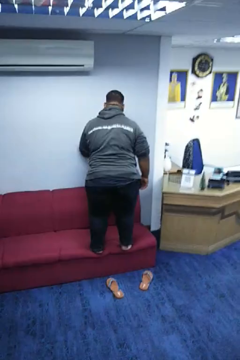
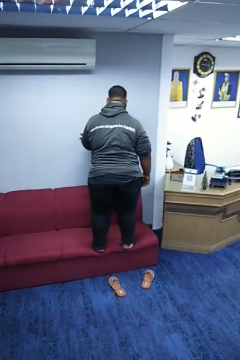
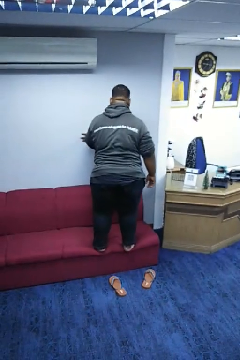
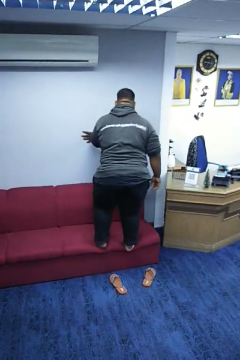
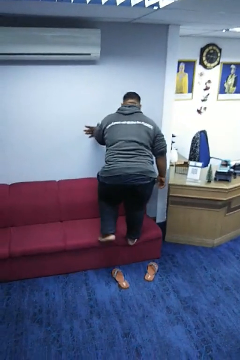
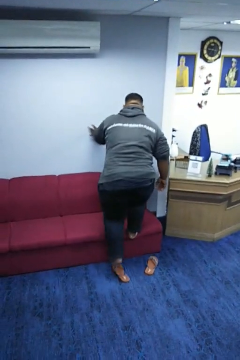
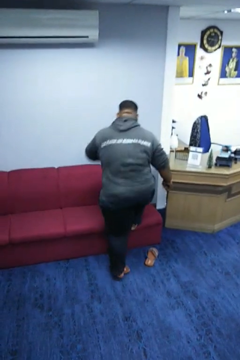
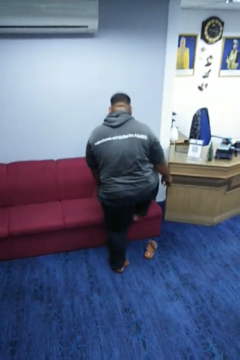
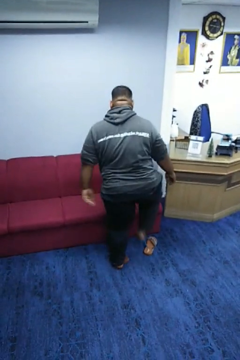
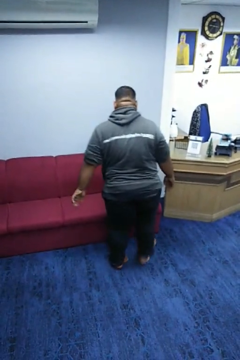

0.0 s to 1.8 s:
person climbs off couch

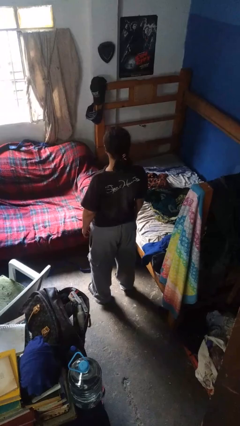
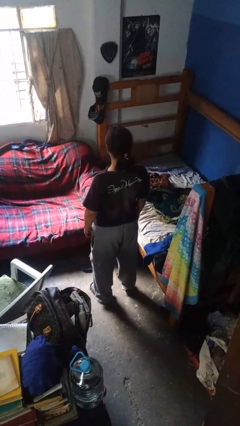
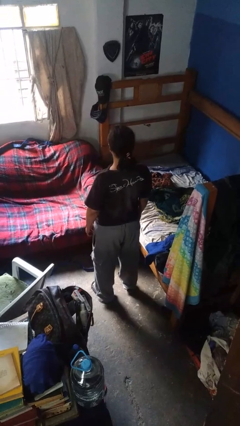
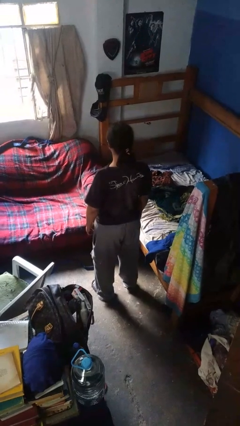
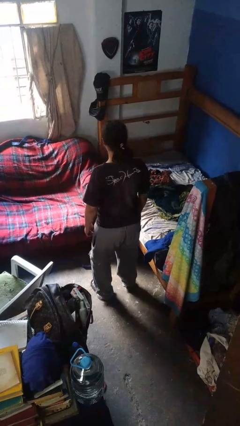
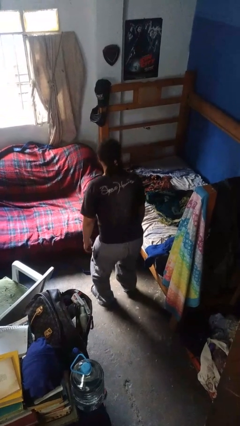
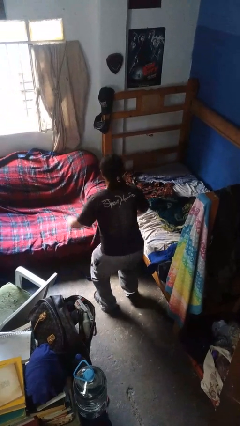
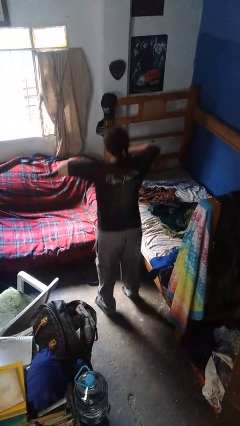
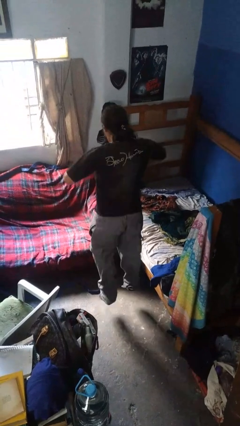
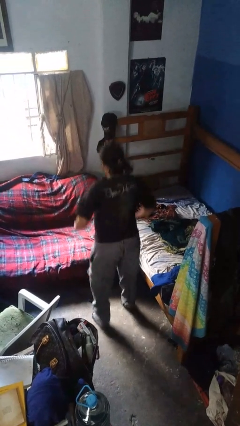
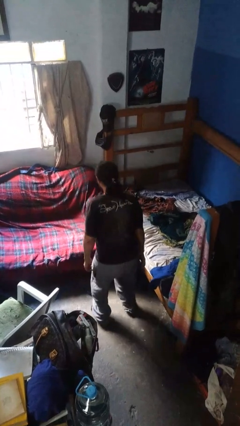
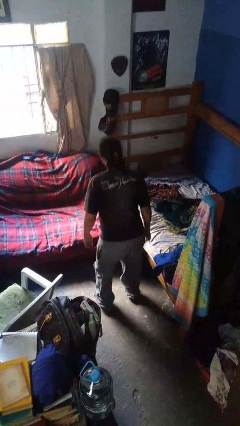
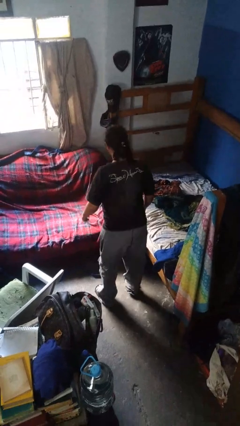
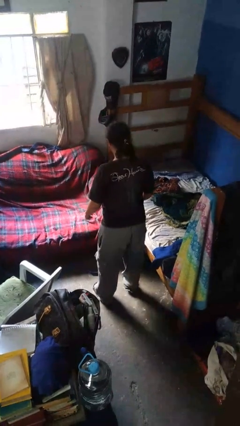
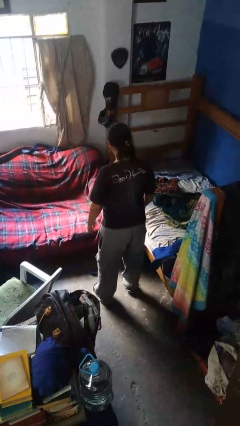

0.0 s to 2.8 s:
person jumps

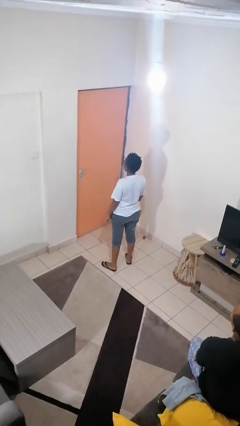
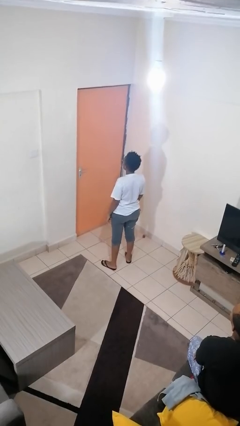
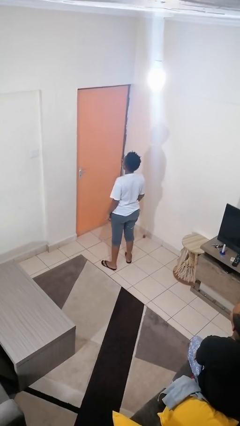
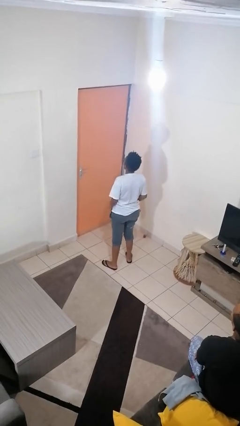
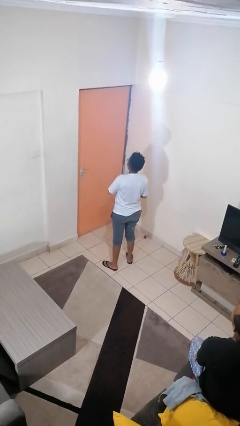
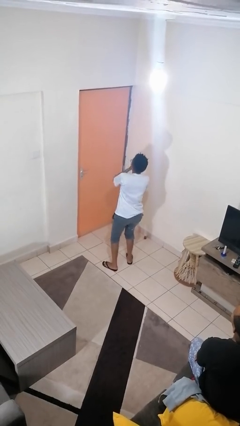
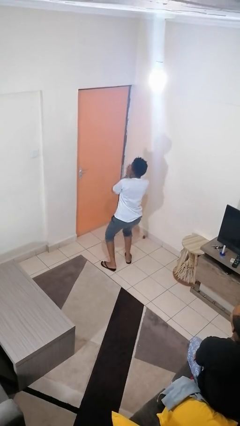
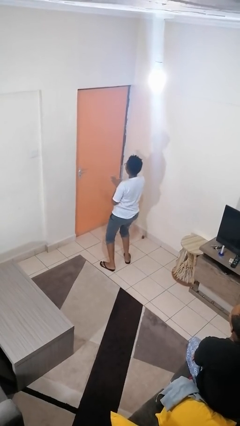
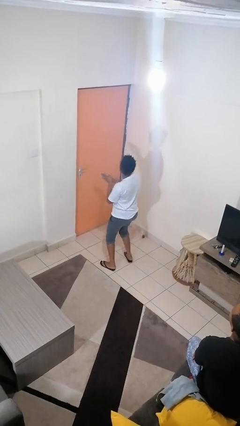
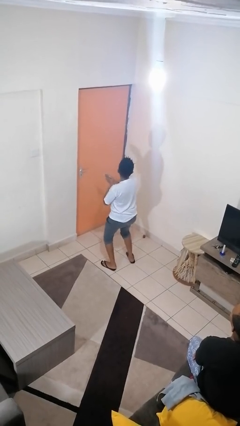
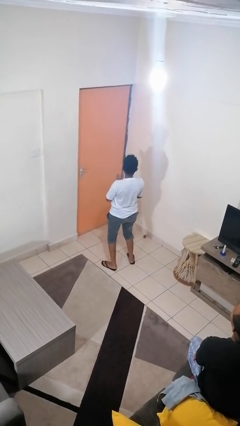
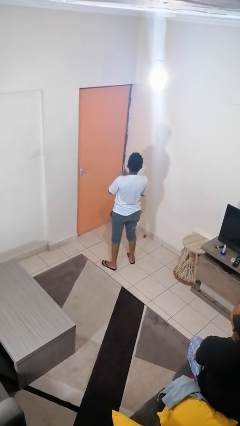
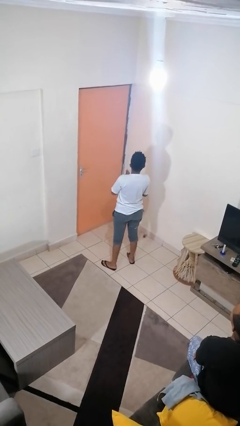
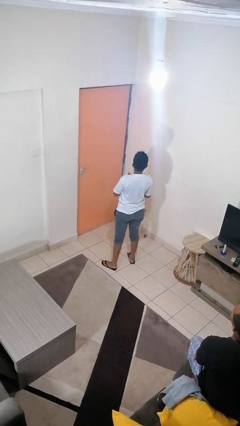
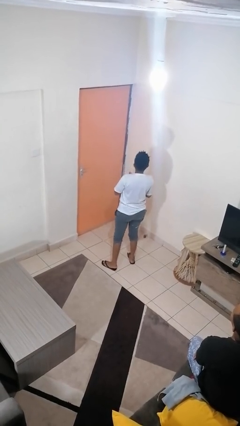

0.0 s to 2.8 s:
person dances in place

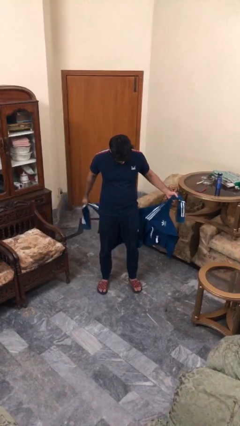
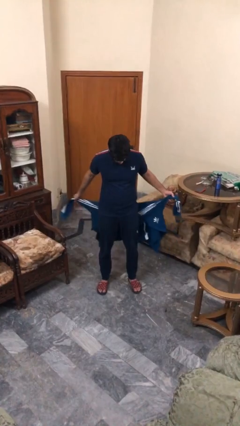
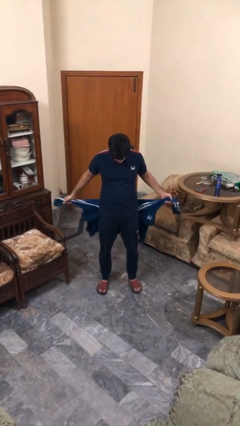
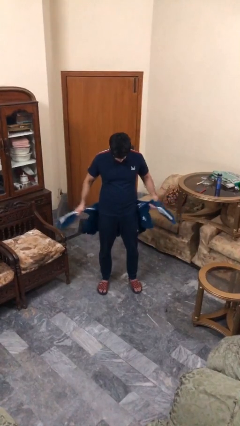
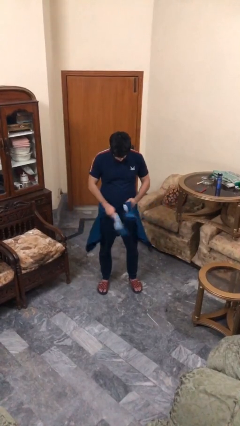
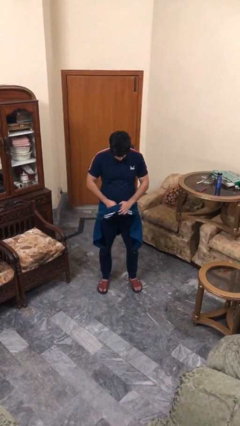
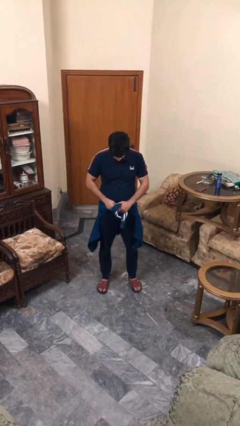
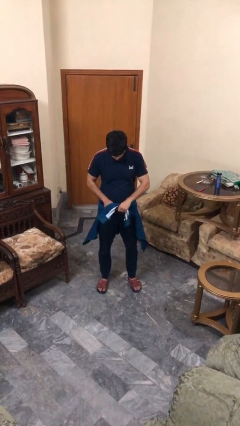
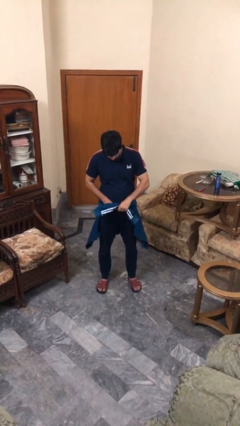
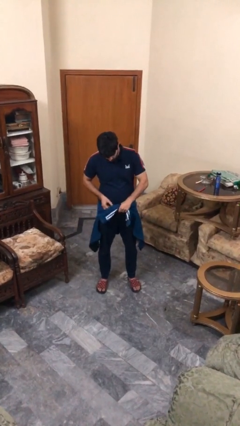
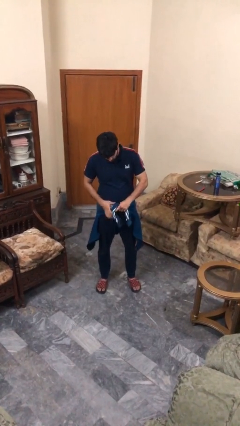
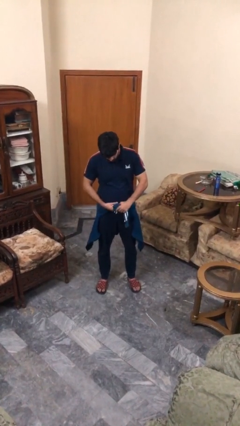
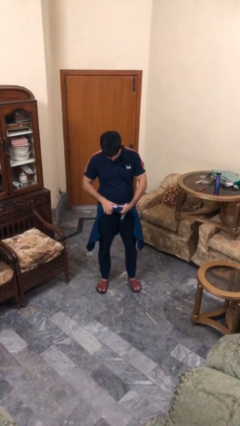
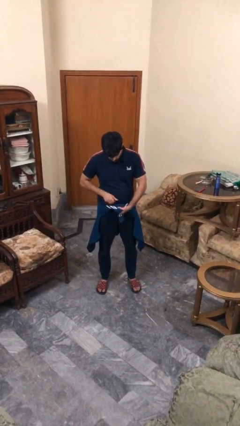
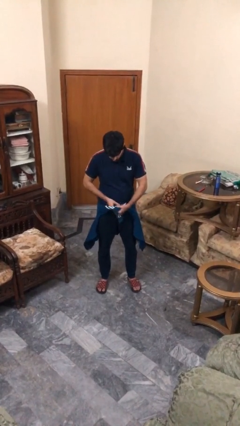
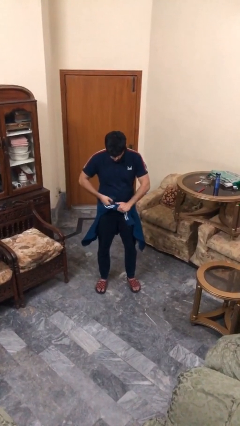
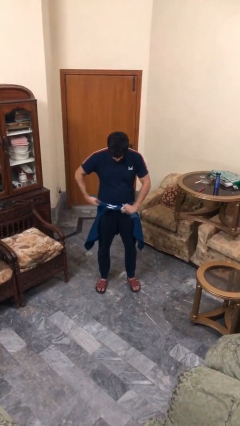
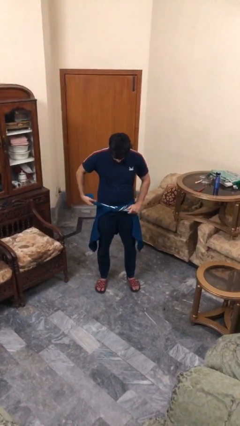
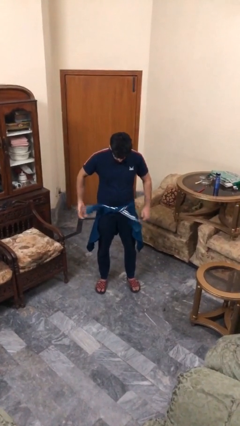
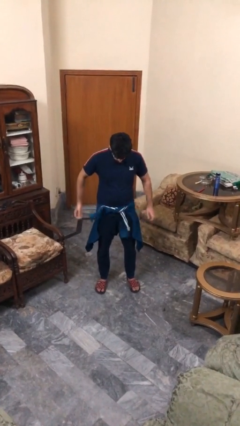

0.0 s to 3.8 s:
person ties jacket around waist

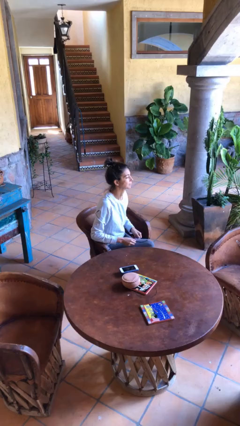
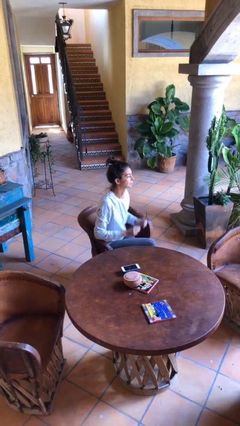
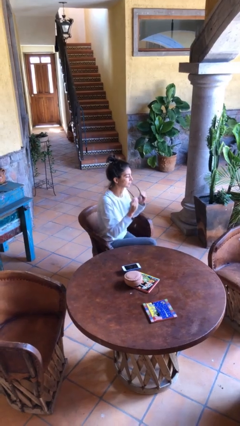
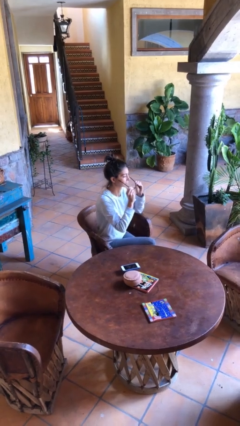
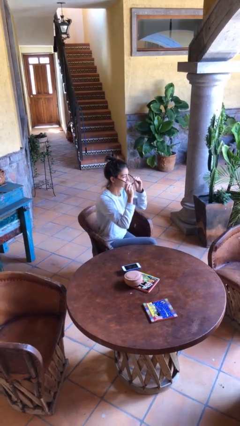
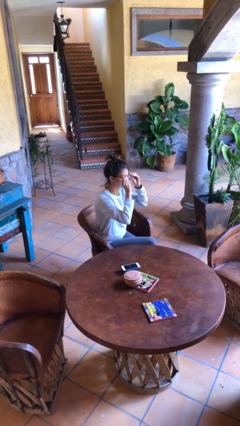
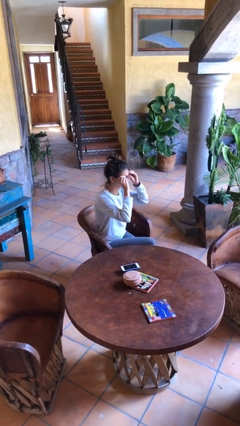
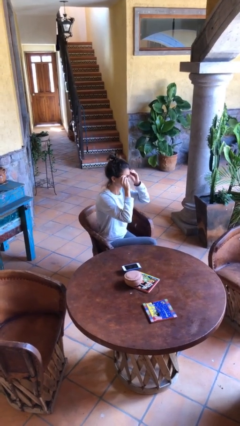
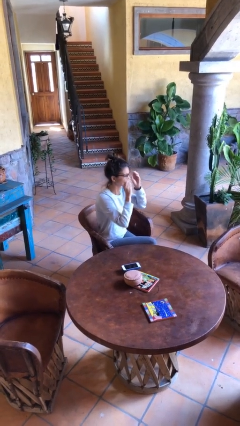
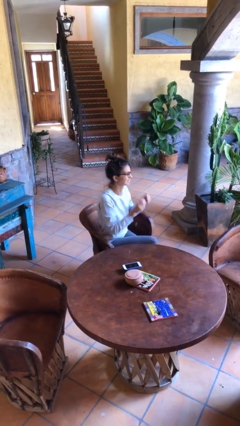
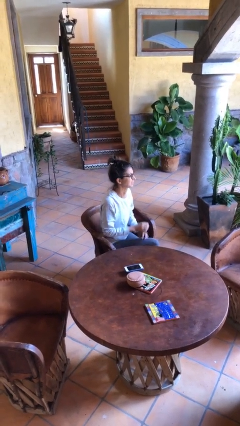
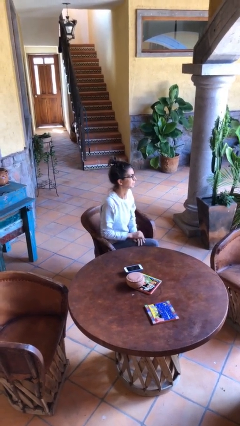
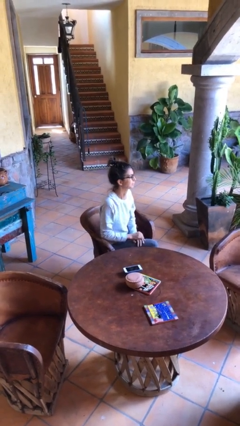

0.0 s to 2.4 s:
person puts on glasses

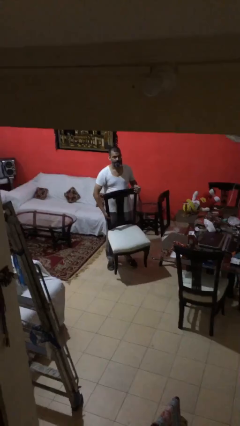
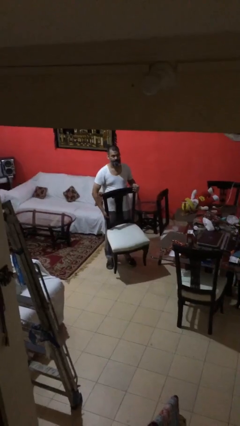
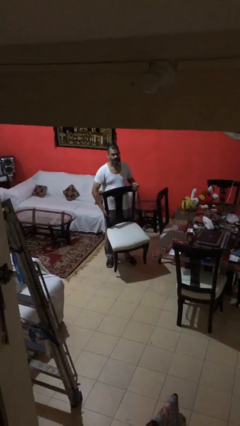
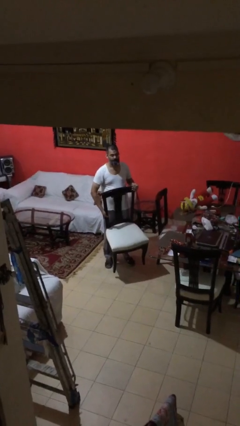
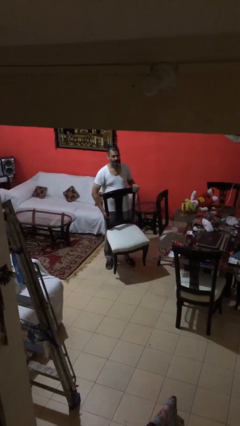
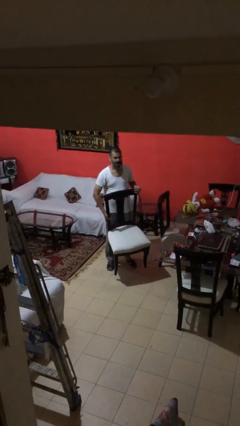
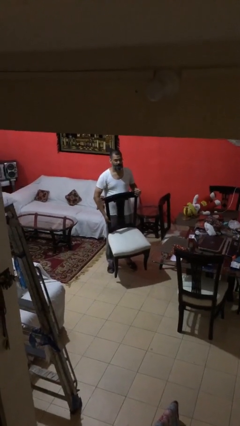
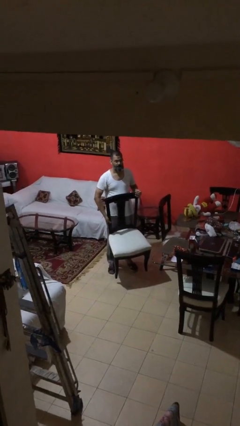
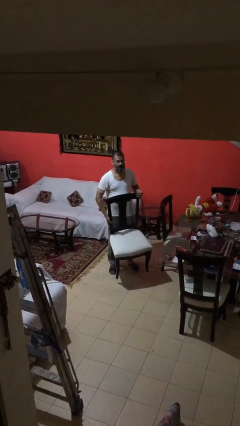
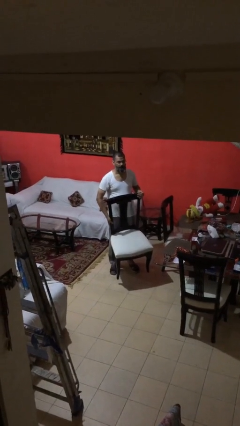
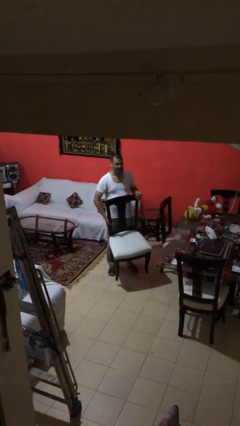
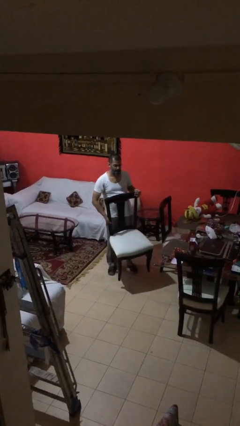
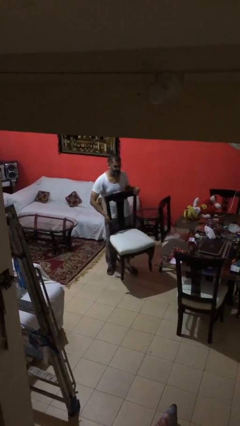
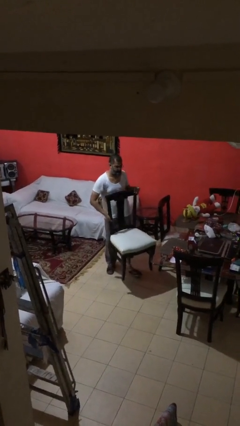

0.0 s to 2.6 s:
person carries heavy object

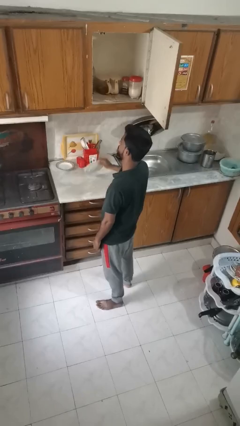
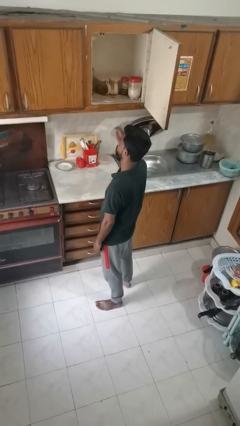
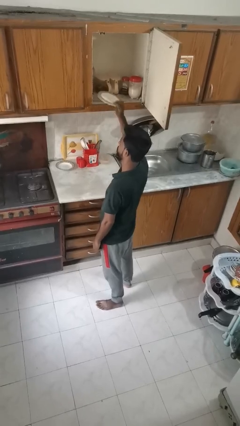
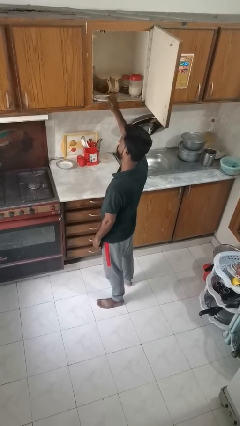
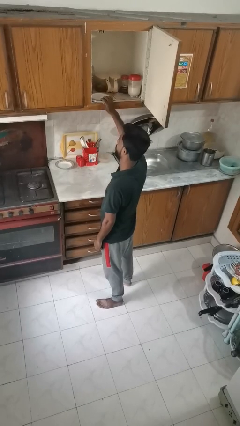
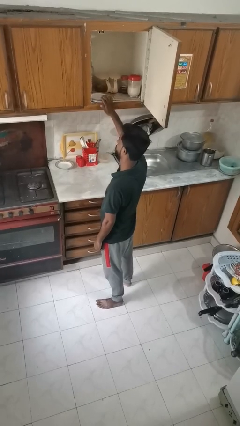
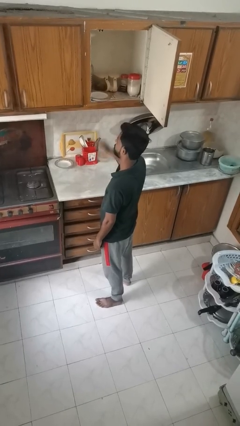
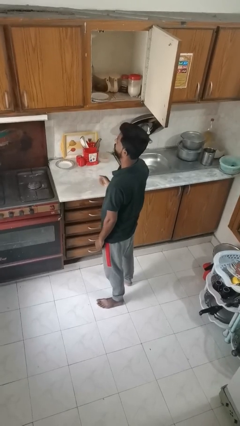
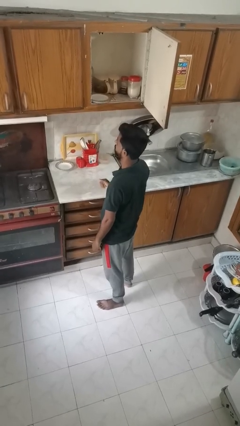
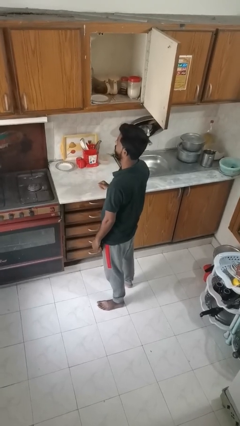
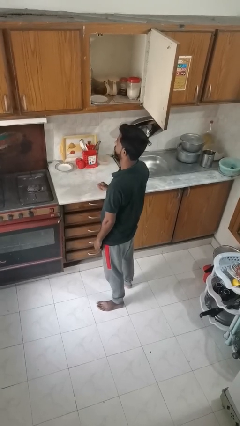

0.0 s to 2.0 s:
person puts object in cabinet
